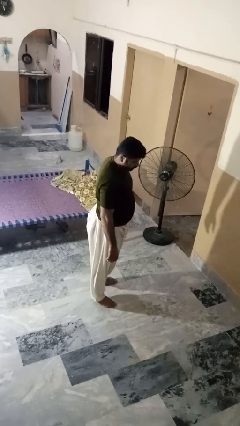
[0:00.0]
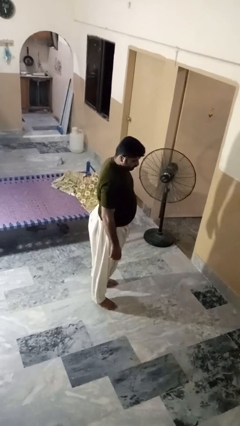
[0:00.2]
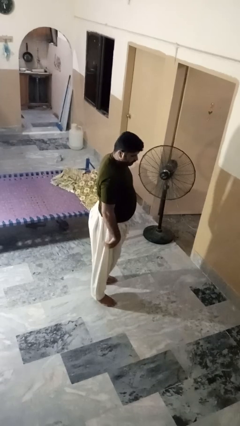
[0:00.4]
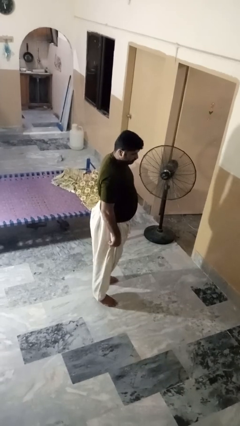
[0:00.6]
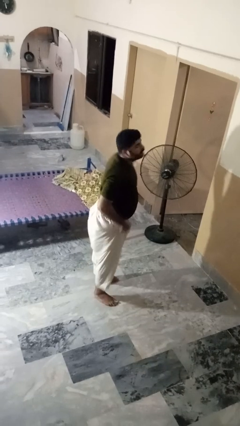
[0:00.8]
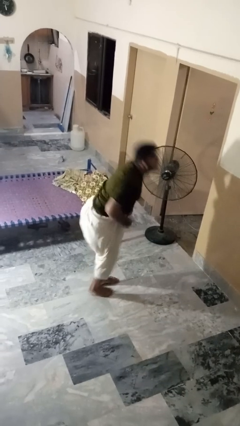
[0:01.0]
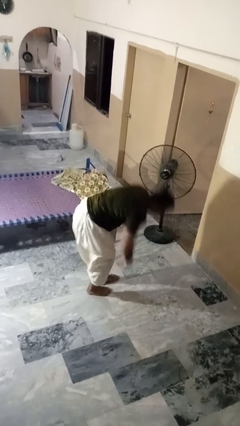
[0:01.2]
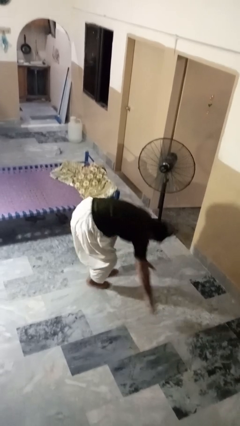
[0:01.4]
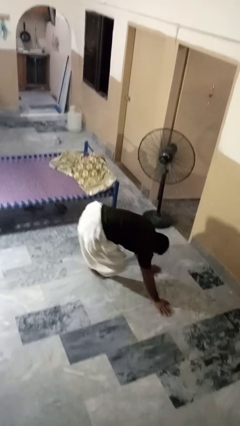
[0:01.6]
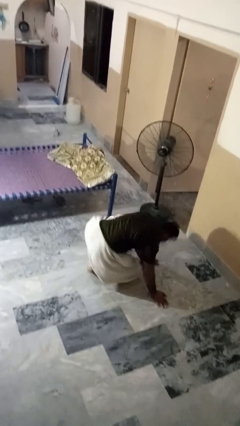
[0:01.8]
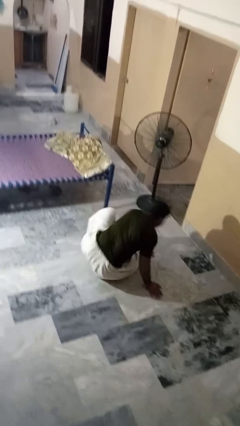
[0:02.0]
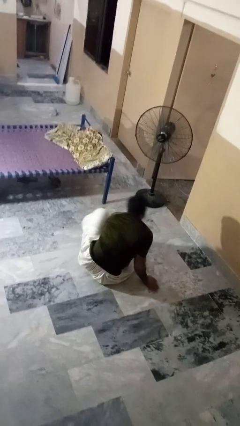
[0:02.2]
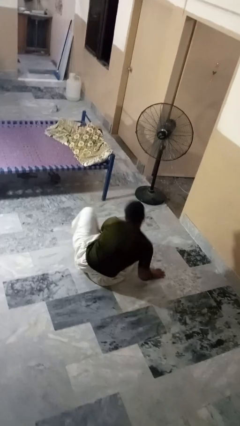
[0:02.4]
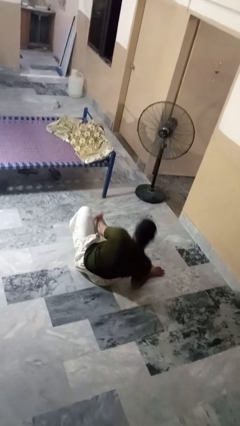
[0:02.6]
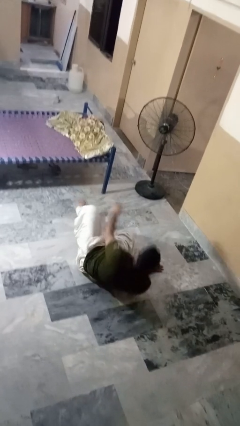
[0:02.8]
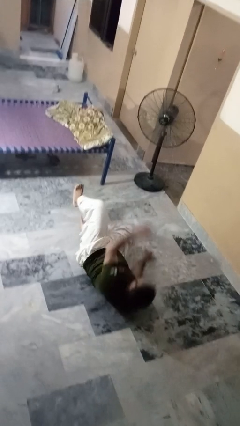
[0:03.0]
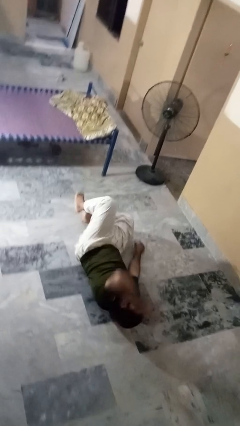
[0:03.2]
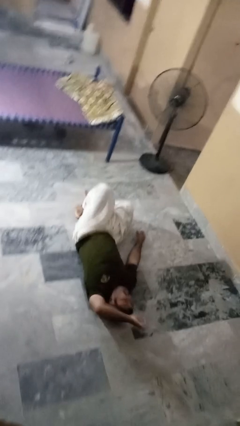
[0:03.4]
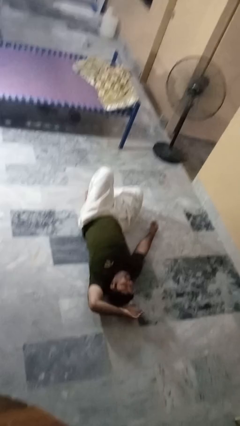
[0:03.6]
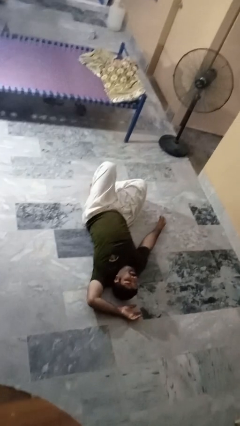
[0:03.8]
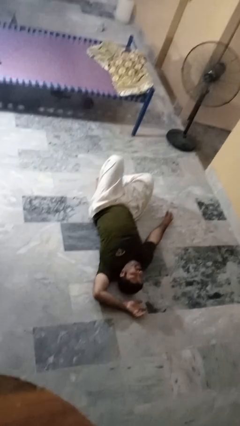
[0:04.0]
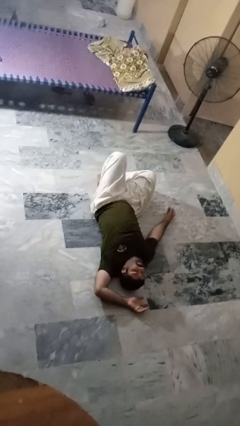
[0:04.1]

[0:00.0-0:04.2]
person falls while standing

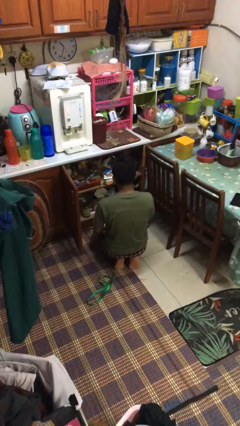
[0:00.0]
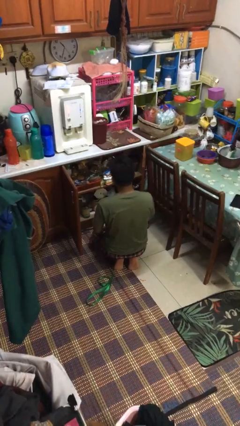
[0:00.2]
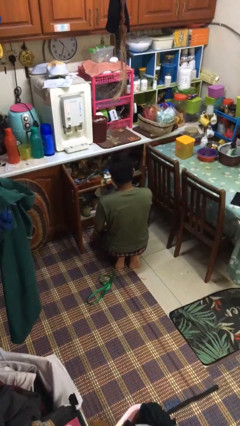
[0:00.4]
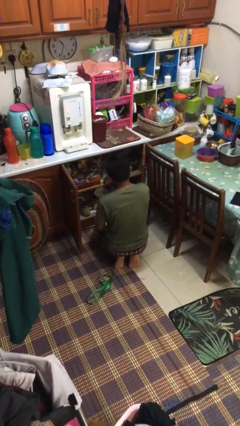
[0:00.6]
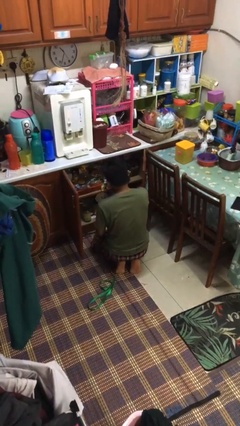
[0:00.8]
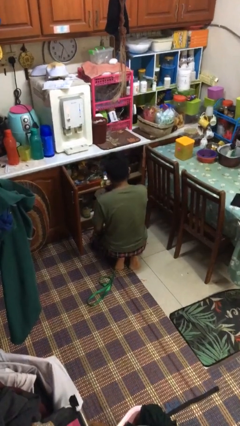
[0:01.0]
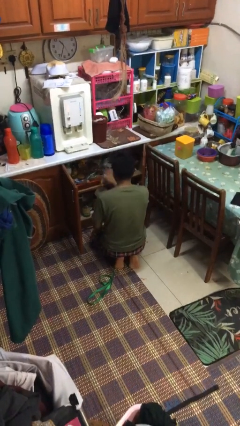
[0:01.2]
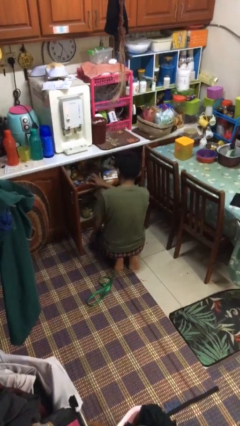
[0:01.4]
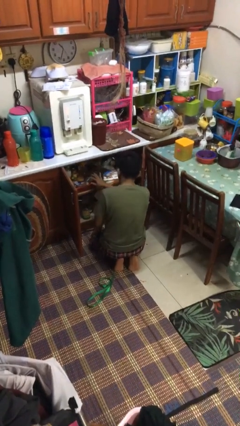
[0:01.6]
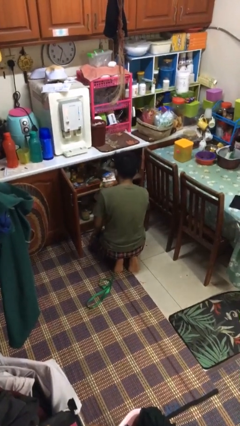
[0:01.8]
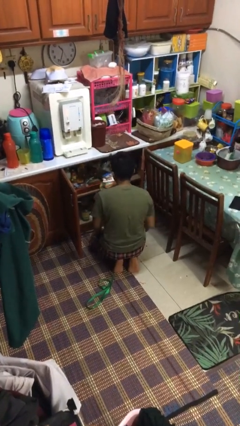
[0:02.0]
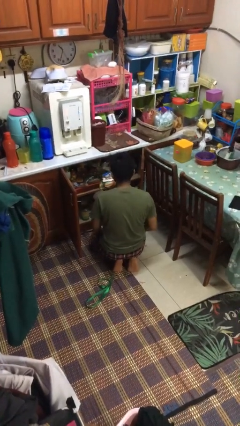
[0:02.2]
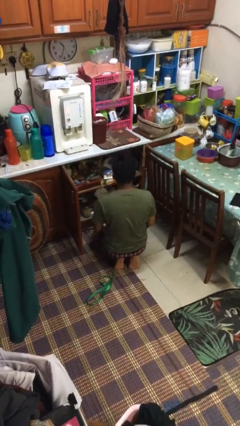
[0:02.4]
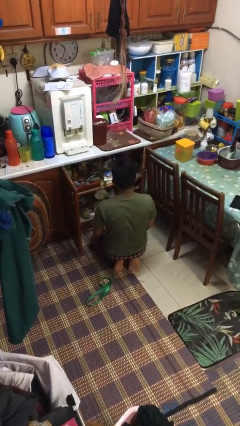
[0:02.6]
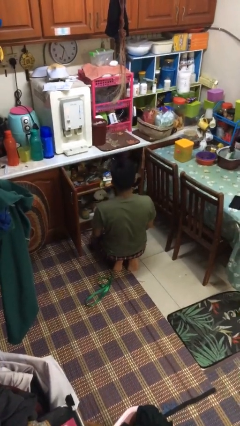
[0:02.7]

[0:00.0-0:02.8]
person searches in kitchen drawer

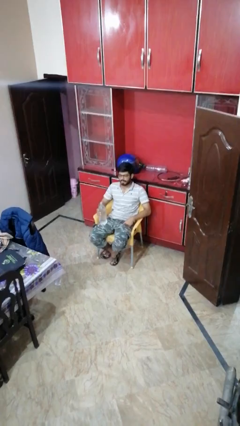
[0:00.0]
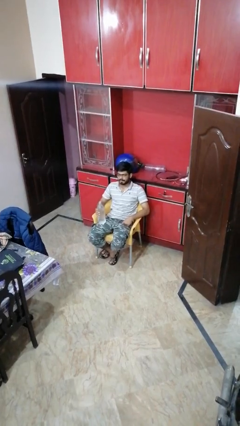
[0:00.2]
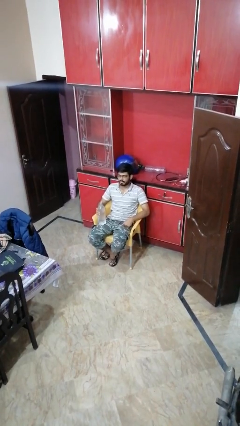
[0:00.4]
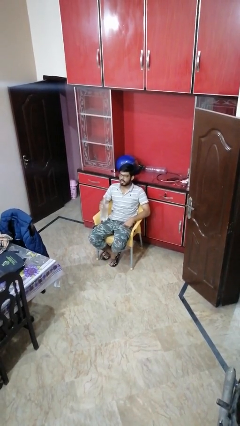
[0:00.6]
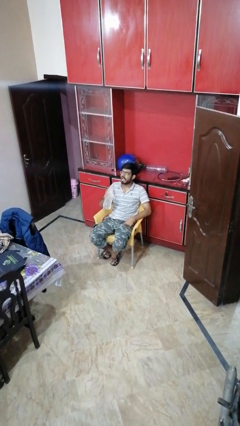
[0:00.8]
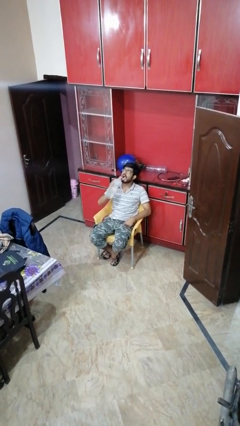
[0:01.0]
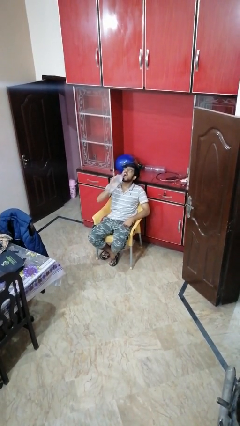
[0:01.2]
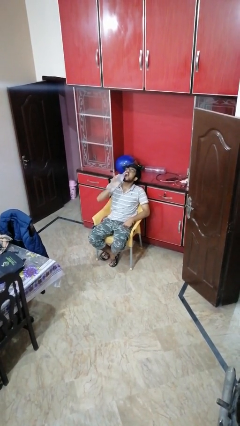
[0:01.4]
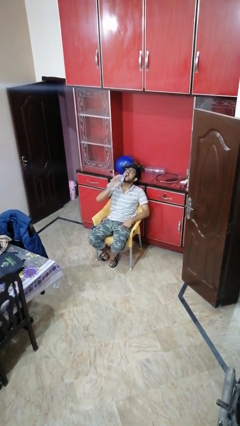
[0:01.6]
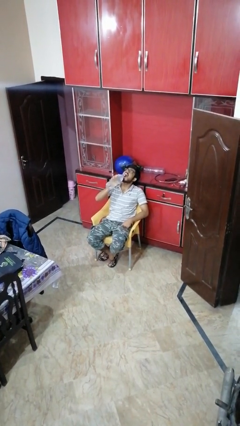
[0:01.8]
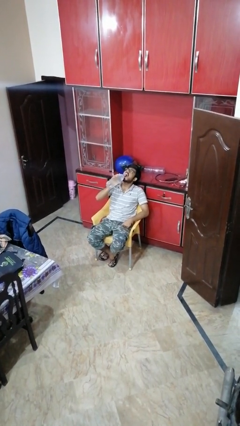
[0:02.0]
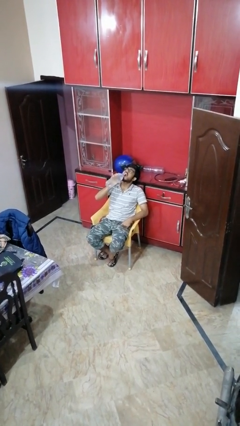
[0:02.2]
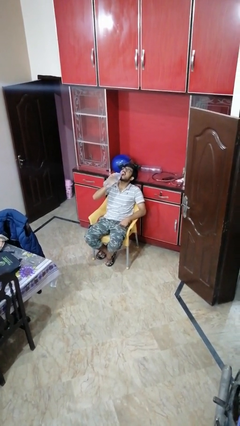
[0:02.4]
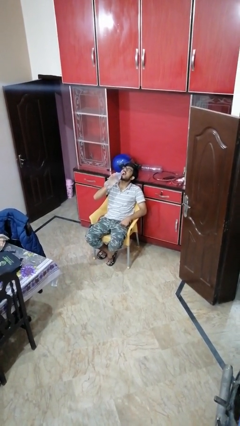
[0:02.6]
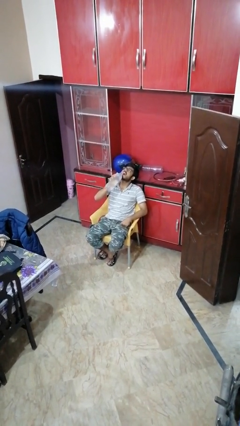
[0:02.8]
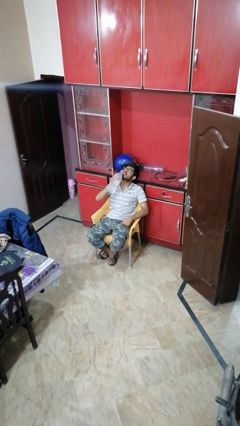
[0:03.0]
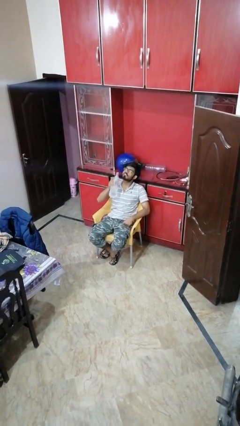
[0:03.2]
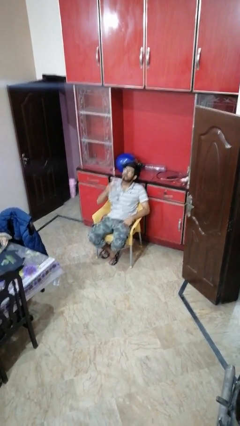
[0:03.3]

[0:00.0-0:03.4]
person drinks from bottle

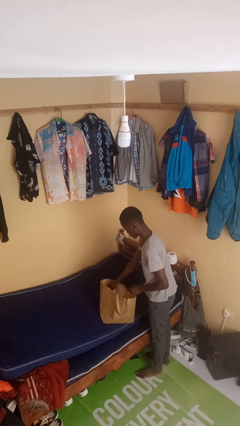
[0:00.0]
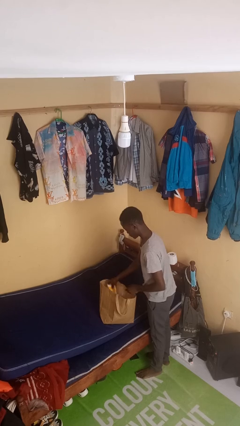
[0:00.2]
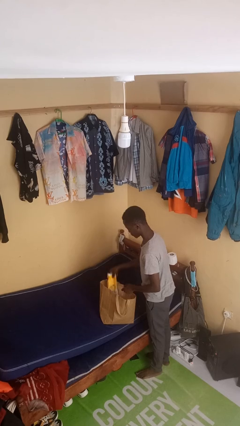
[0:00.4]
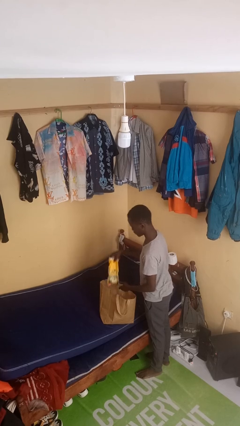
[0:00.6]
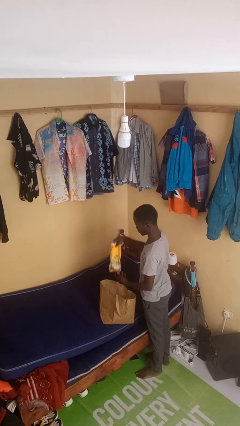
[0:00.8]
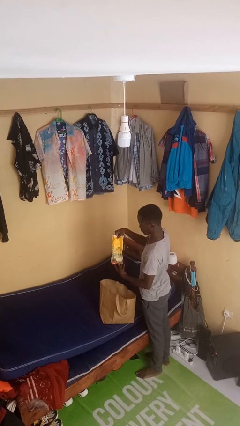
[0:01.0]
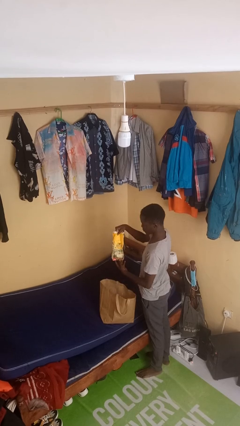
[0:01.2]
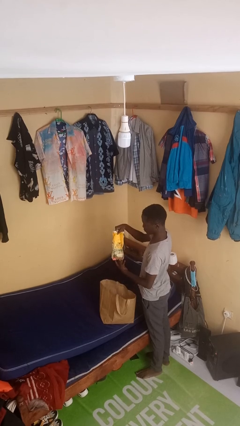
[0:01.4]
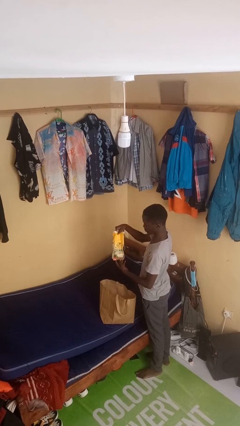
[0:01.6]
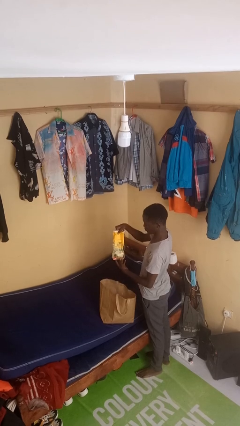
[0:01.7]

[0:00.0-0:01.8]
person takes object from bag

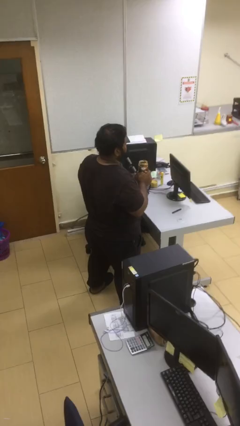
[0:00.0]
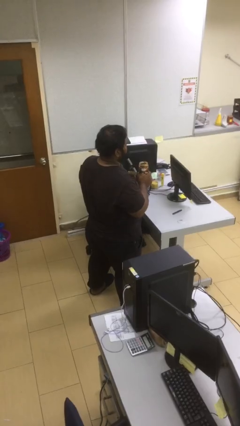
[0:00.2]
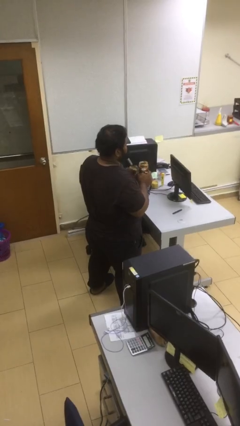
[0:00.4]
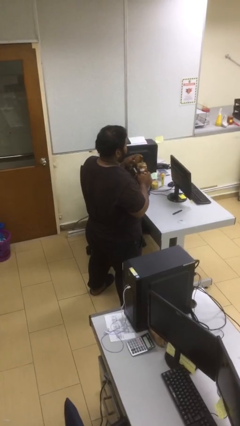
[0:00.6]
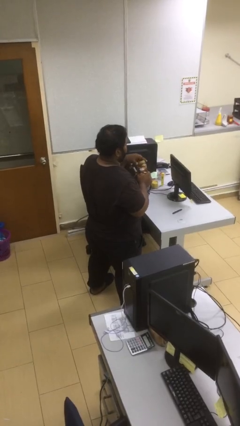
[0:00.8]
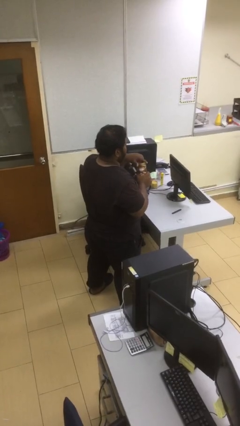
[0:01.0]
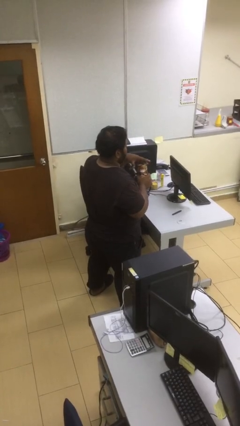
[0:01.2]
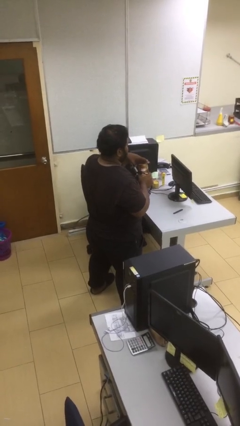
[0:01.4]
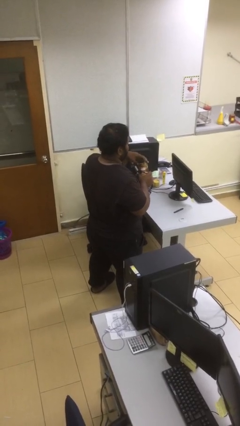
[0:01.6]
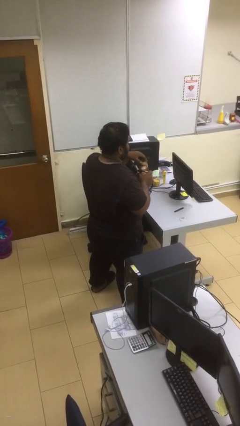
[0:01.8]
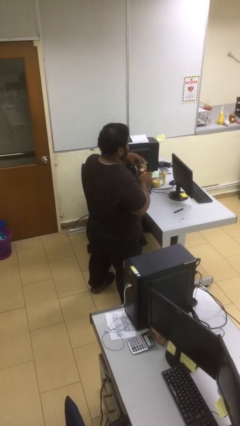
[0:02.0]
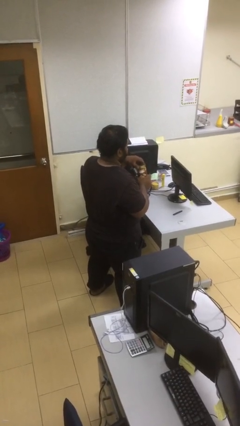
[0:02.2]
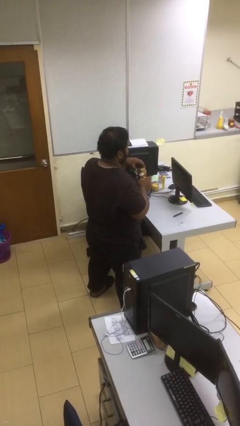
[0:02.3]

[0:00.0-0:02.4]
person closes jar

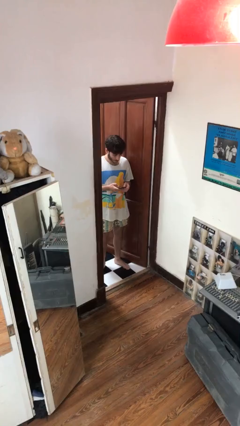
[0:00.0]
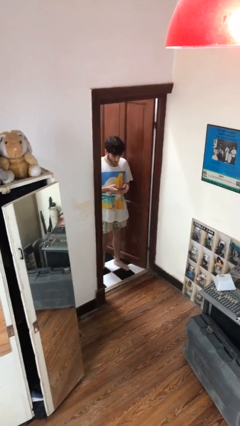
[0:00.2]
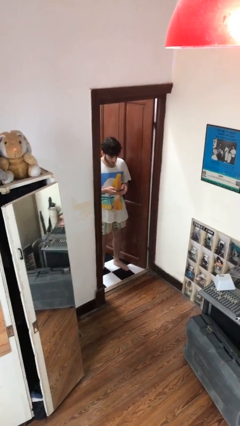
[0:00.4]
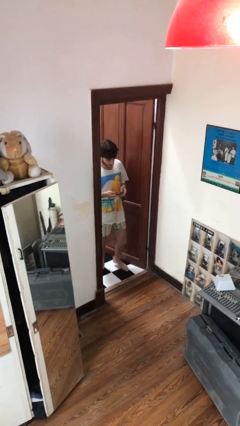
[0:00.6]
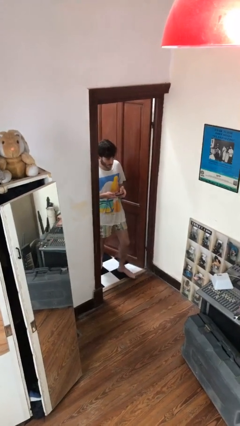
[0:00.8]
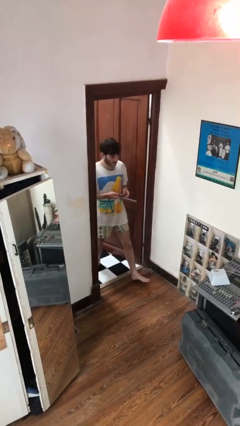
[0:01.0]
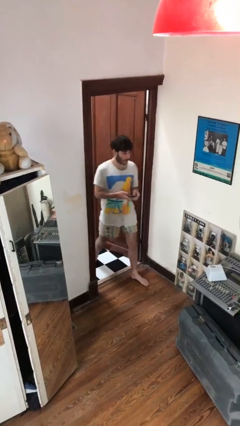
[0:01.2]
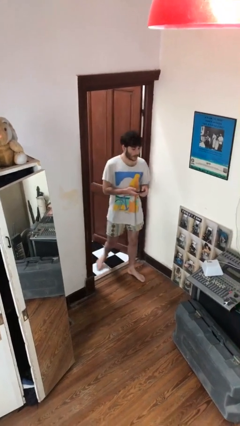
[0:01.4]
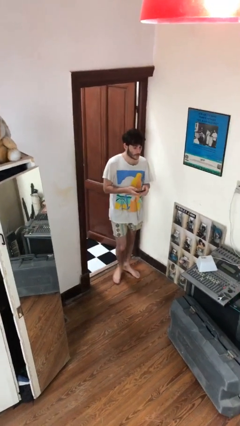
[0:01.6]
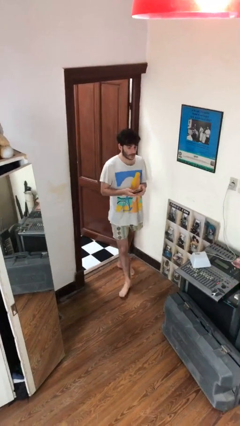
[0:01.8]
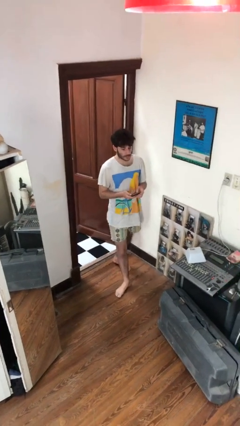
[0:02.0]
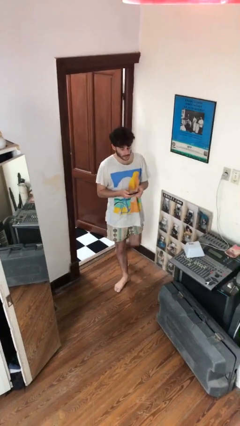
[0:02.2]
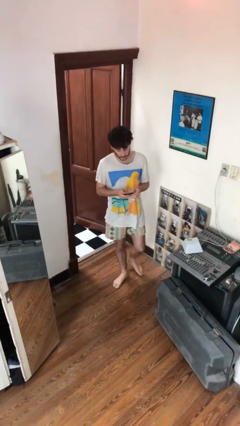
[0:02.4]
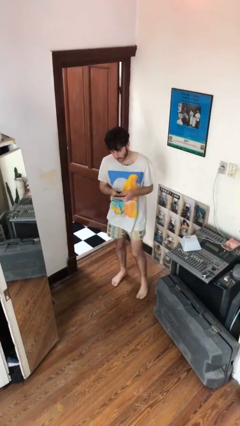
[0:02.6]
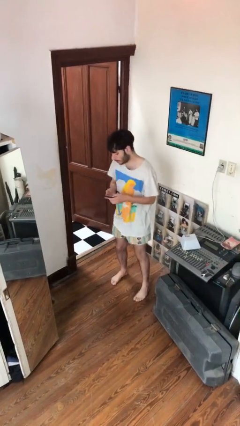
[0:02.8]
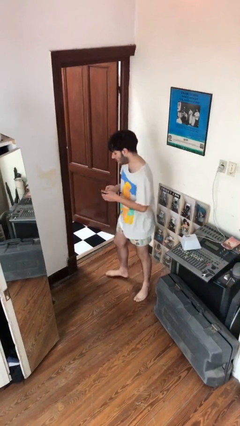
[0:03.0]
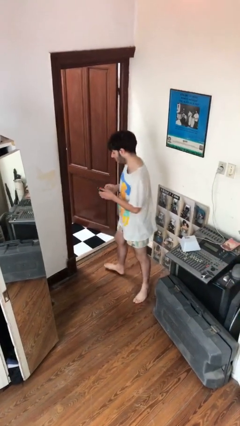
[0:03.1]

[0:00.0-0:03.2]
person enters scene through structure
